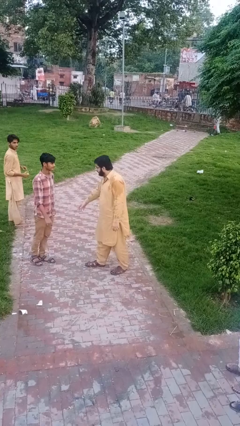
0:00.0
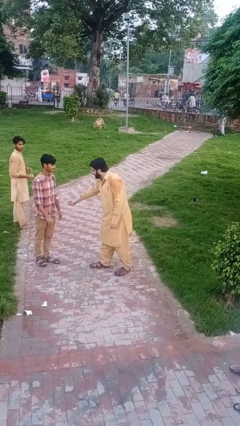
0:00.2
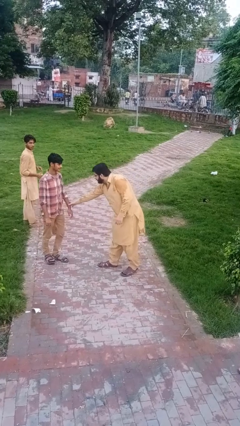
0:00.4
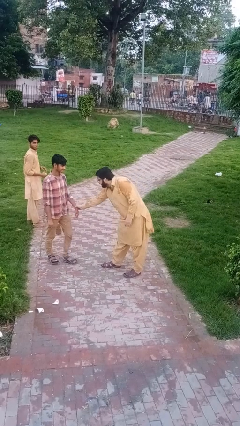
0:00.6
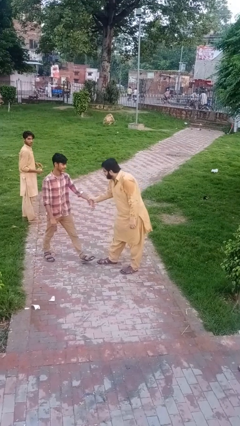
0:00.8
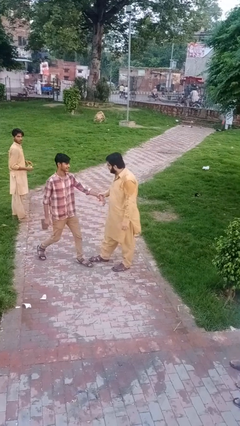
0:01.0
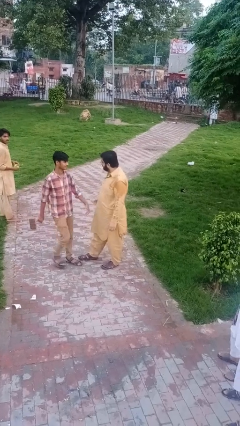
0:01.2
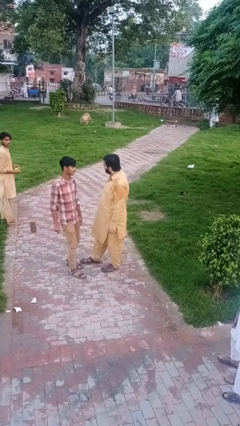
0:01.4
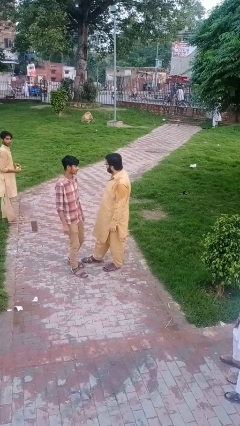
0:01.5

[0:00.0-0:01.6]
person grabs person by forearm

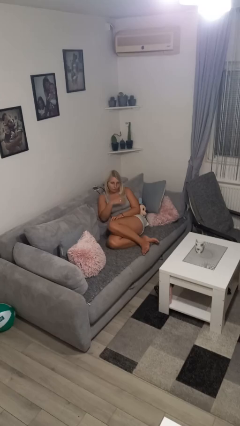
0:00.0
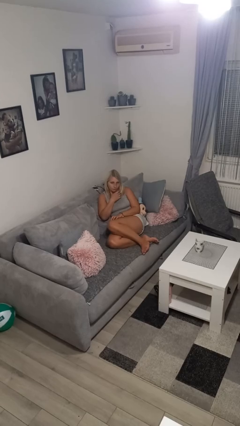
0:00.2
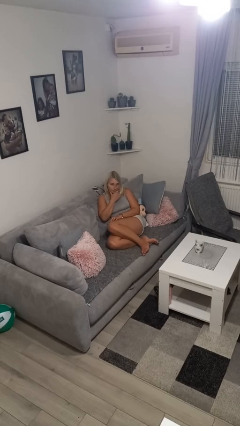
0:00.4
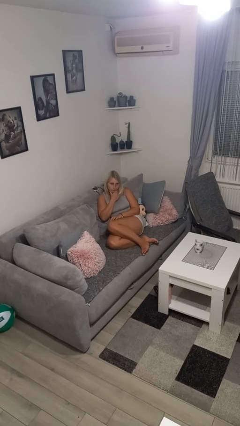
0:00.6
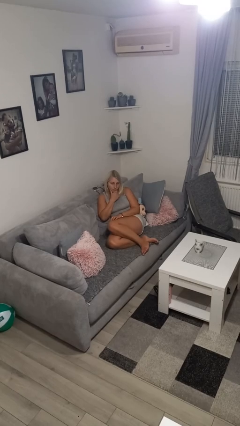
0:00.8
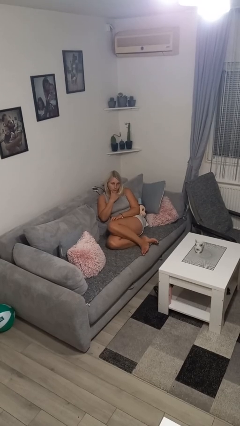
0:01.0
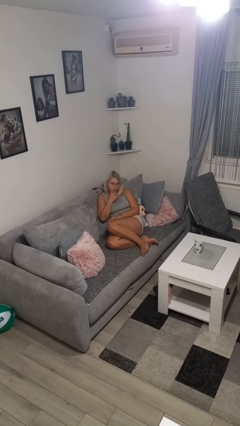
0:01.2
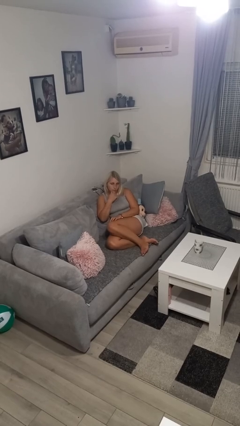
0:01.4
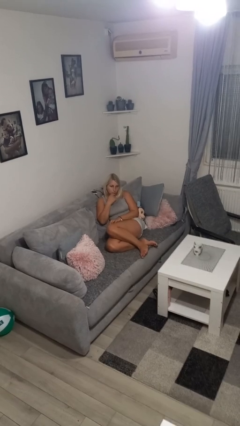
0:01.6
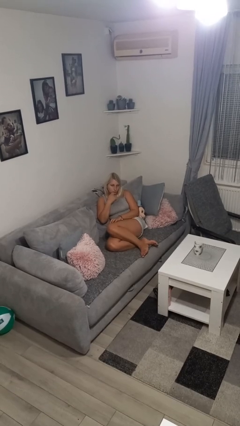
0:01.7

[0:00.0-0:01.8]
person strokes chin

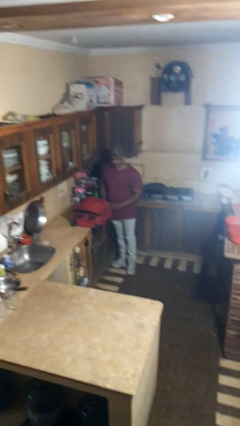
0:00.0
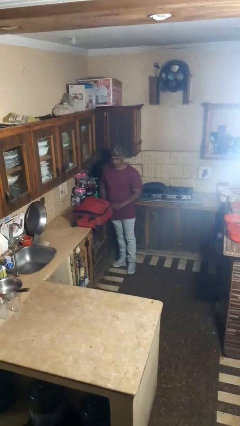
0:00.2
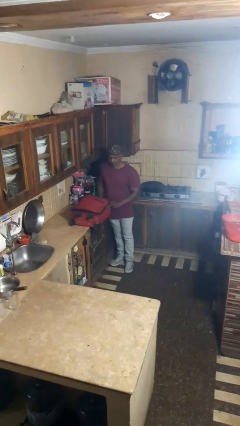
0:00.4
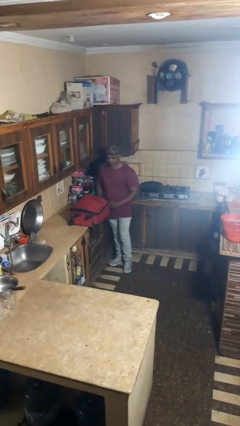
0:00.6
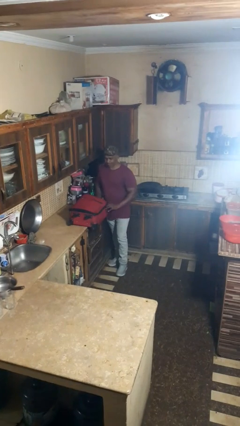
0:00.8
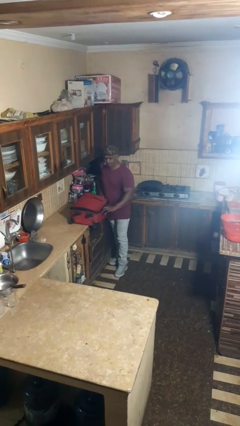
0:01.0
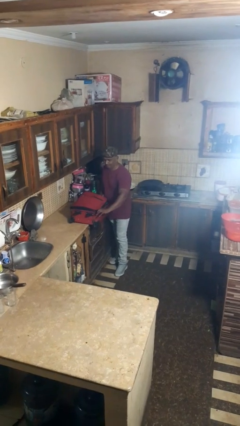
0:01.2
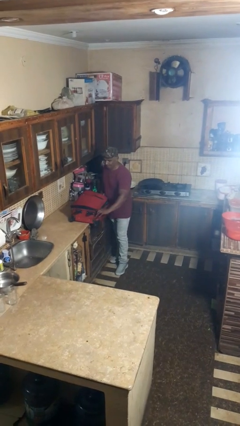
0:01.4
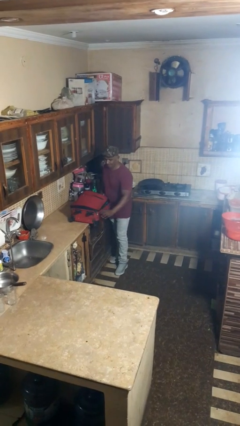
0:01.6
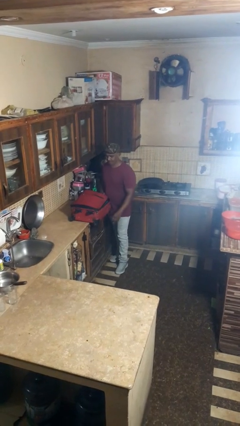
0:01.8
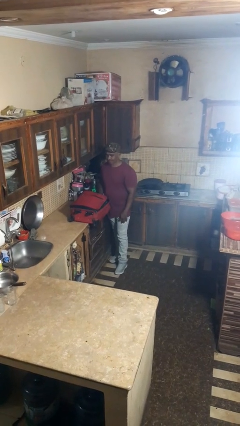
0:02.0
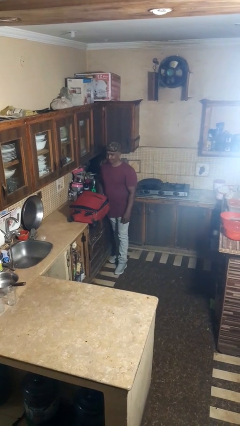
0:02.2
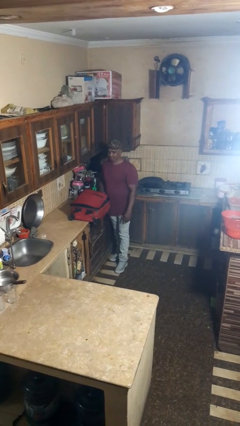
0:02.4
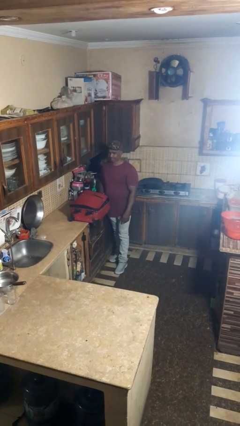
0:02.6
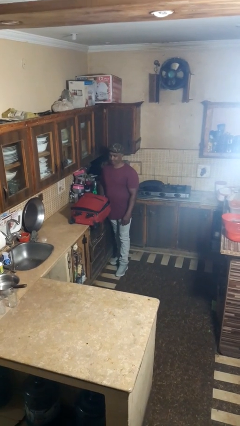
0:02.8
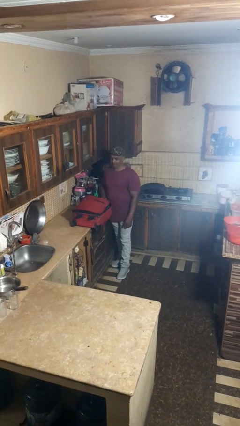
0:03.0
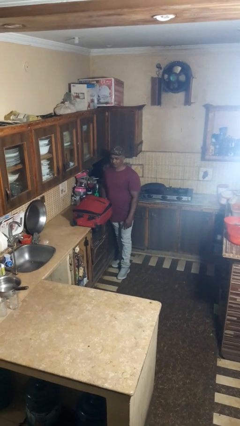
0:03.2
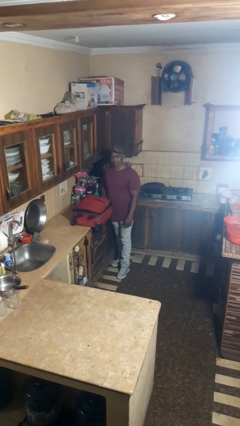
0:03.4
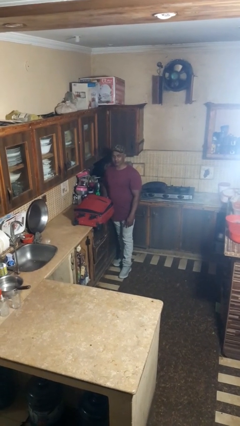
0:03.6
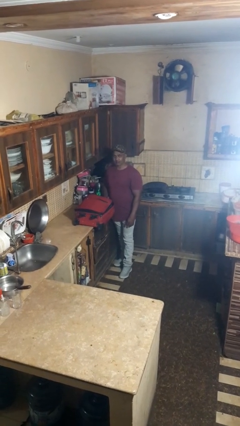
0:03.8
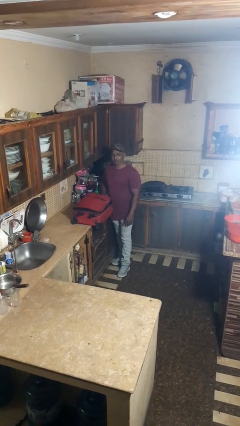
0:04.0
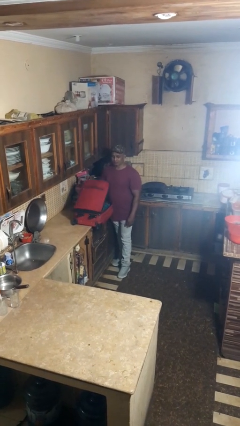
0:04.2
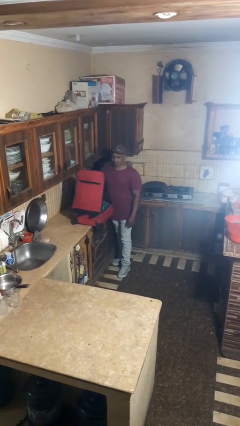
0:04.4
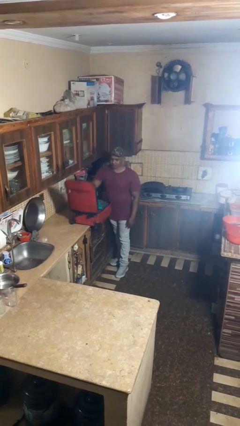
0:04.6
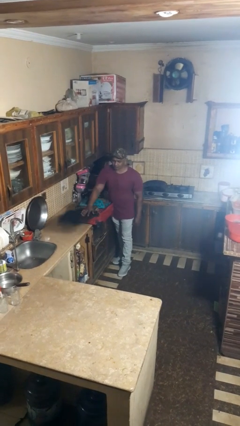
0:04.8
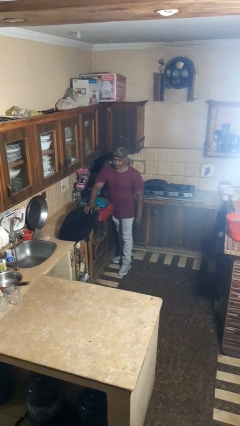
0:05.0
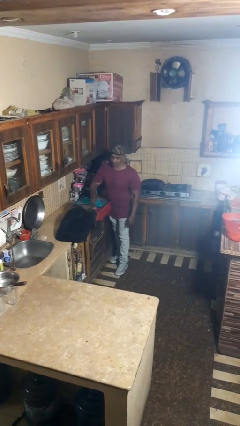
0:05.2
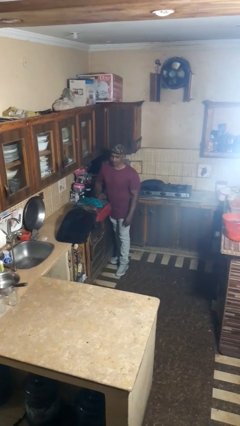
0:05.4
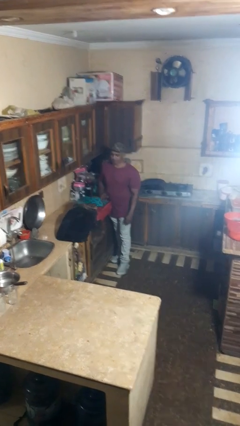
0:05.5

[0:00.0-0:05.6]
person opens suitcase

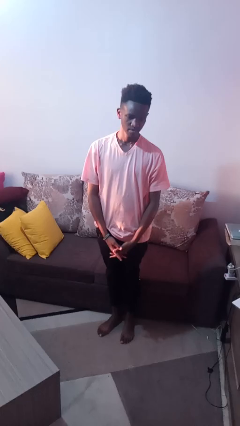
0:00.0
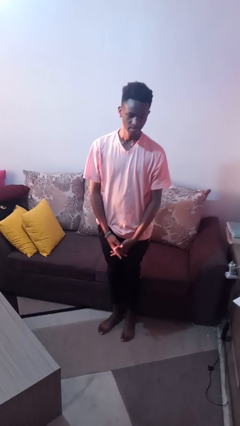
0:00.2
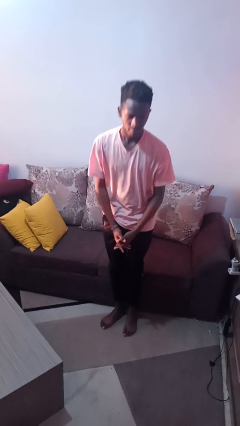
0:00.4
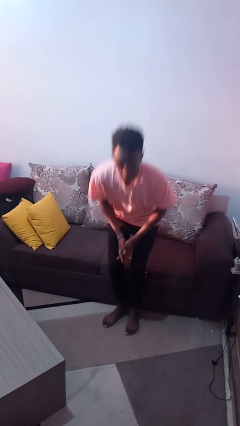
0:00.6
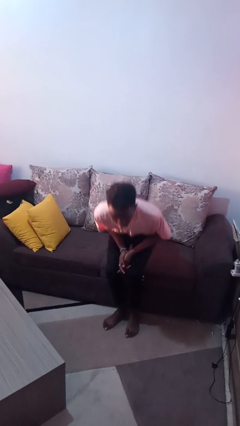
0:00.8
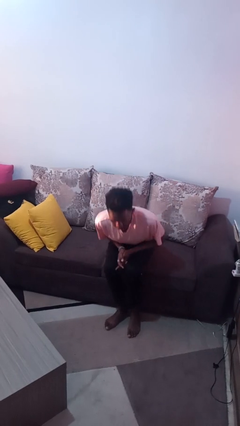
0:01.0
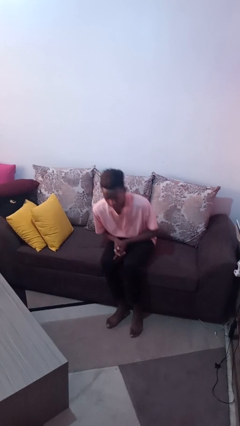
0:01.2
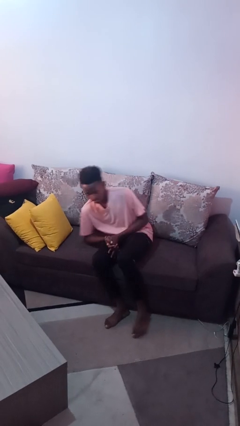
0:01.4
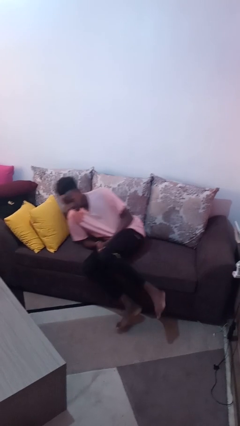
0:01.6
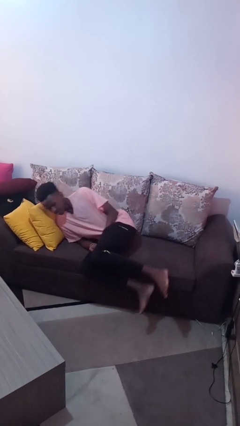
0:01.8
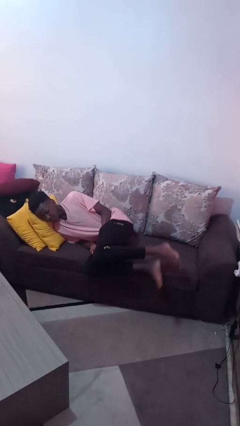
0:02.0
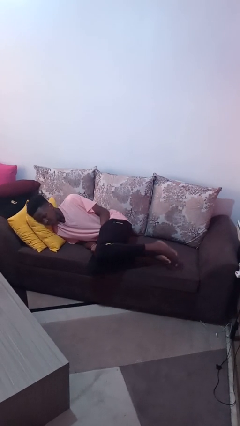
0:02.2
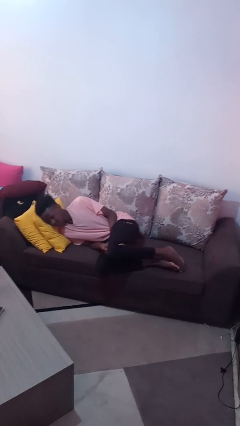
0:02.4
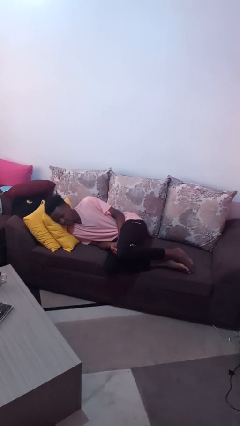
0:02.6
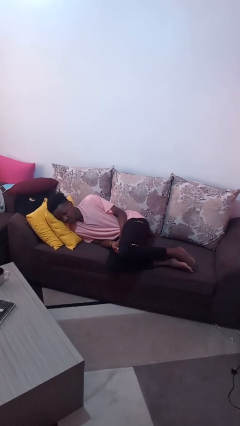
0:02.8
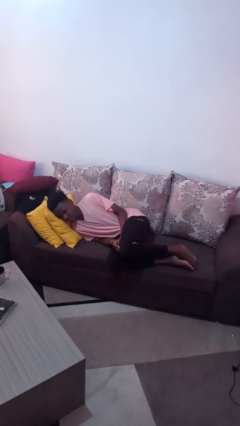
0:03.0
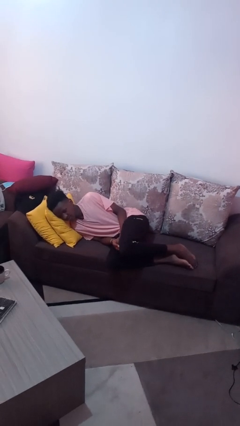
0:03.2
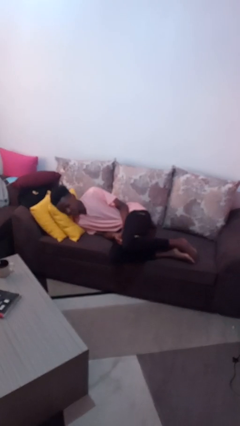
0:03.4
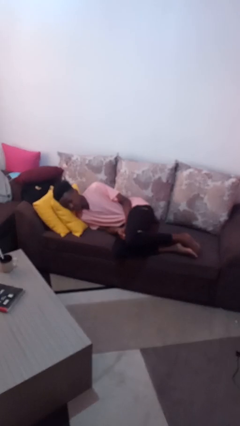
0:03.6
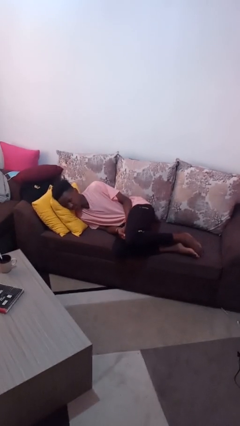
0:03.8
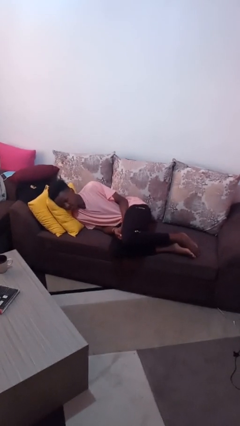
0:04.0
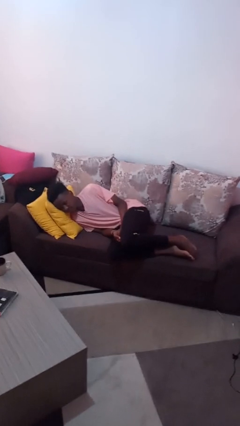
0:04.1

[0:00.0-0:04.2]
person lies down on couch

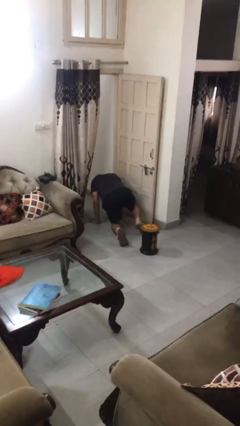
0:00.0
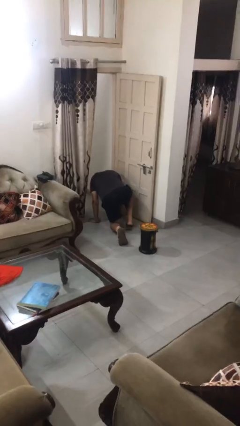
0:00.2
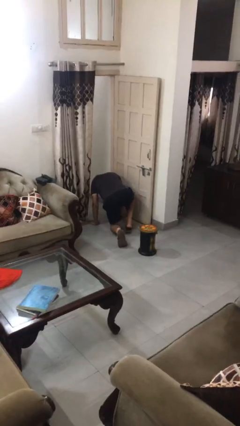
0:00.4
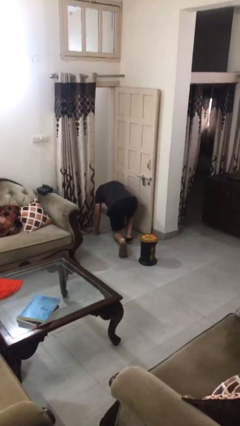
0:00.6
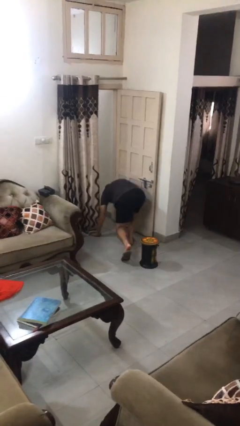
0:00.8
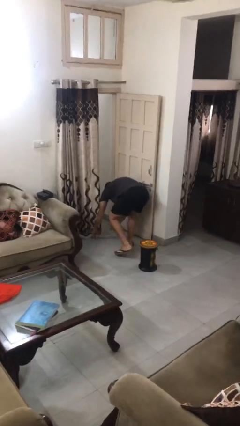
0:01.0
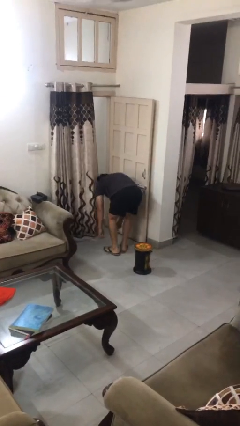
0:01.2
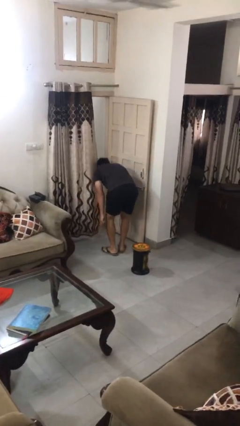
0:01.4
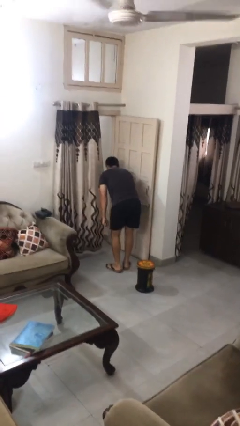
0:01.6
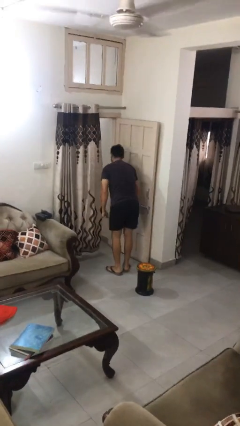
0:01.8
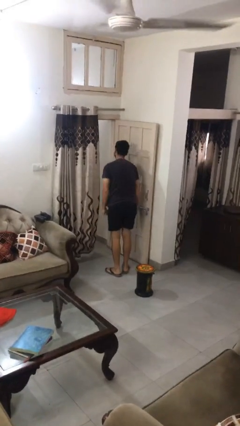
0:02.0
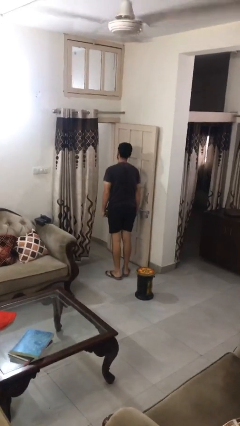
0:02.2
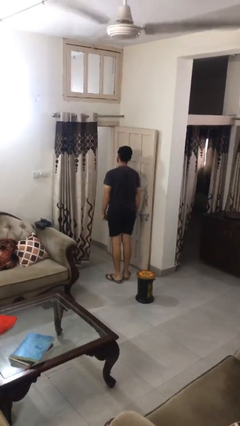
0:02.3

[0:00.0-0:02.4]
person stands up from floor

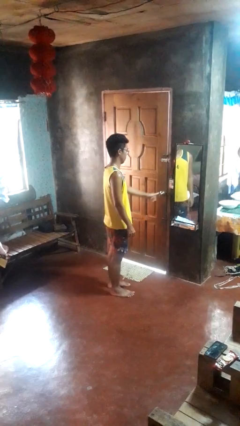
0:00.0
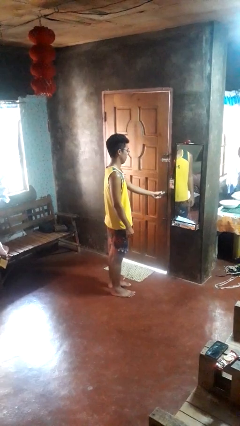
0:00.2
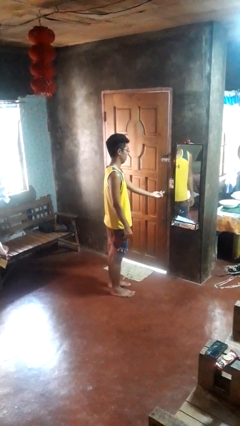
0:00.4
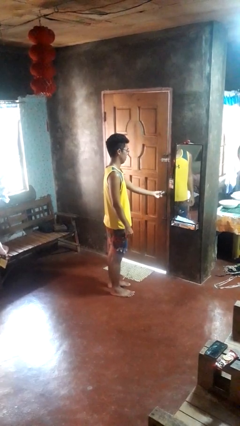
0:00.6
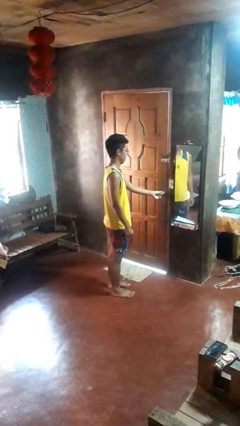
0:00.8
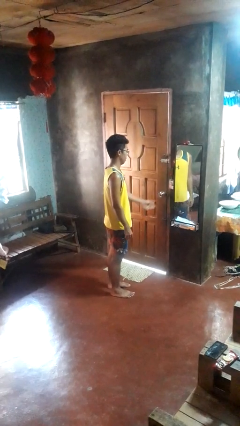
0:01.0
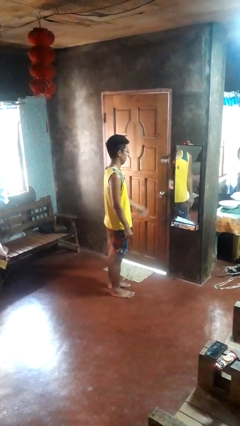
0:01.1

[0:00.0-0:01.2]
person unlocks door with keys

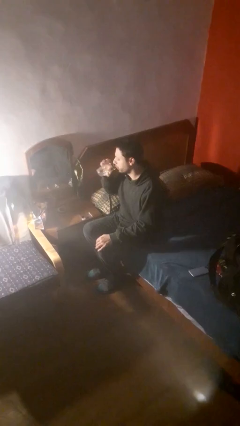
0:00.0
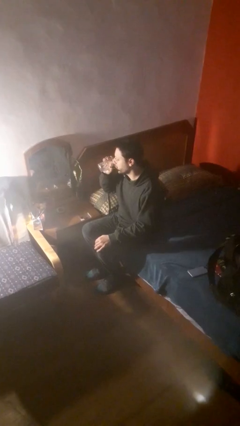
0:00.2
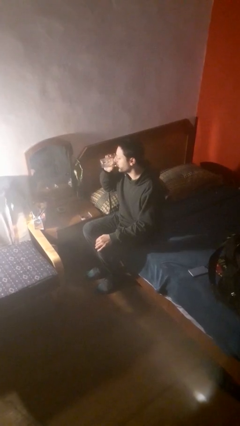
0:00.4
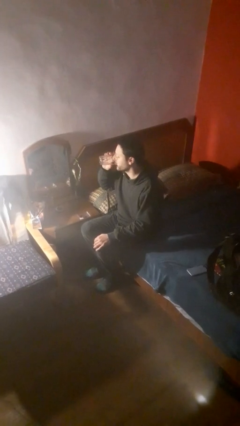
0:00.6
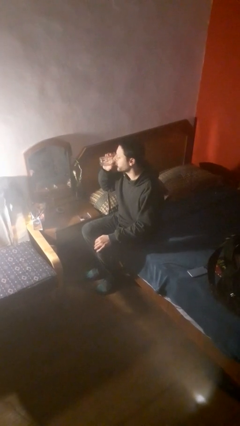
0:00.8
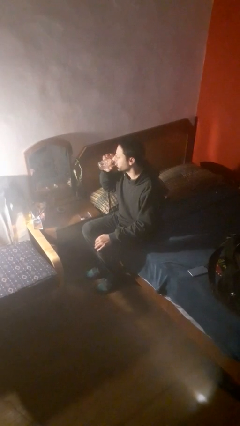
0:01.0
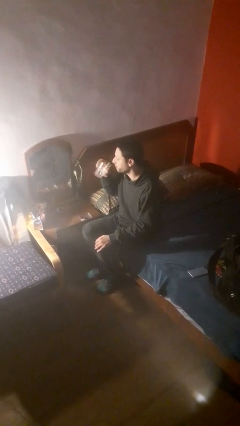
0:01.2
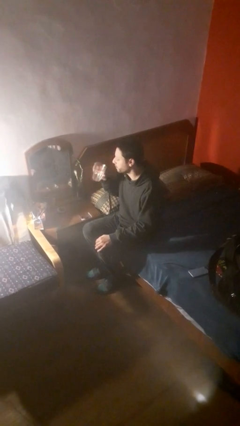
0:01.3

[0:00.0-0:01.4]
person drinks from cup
